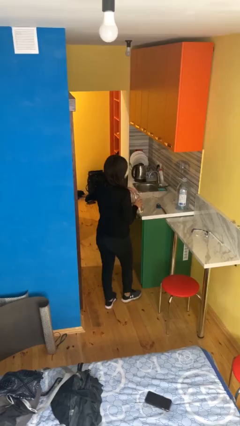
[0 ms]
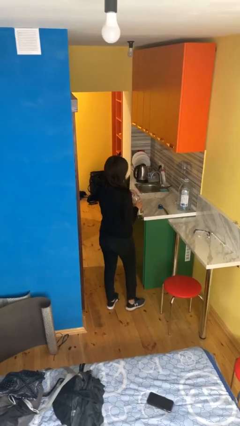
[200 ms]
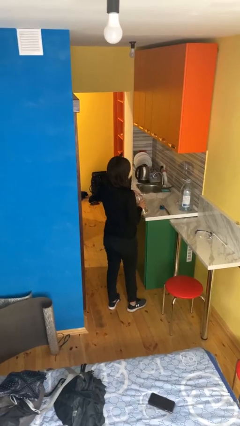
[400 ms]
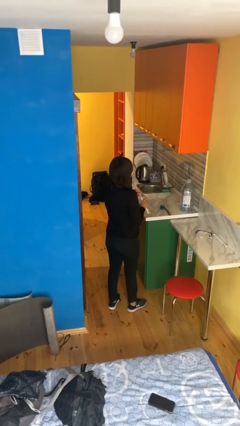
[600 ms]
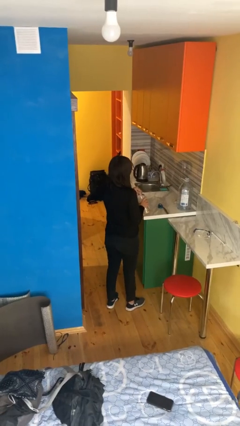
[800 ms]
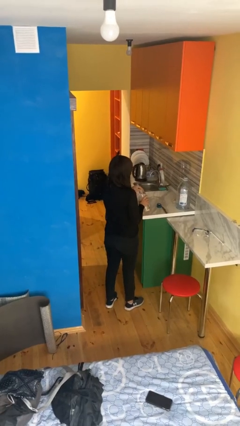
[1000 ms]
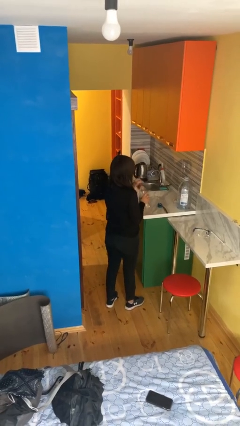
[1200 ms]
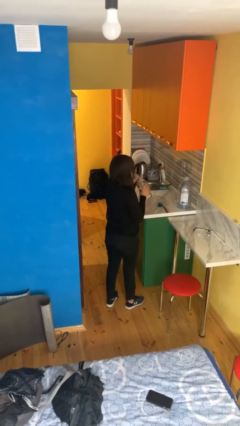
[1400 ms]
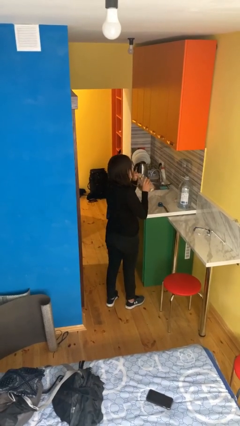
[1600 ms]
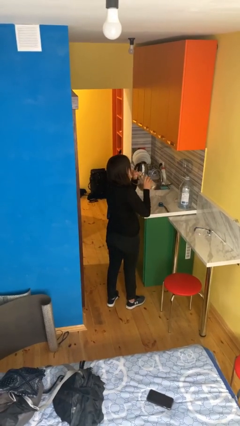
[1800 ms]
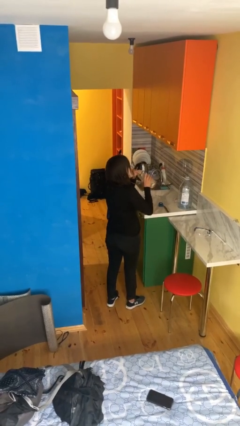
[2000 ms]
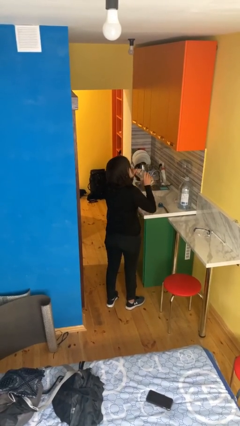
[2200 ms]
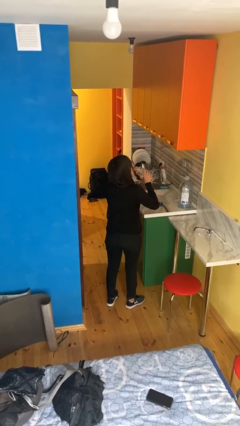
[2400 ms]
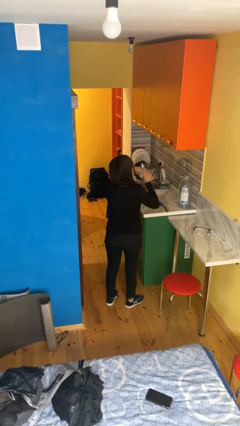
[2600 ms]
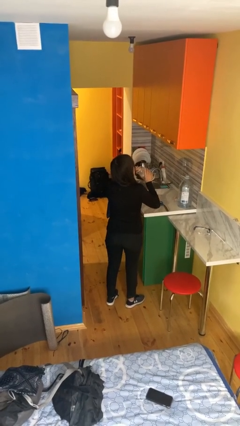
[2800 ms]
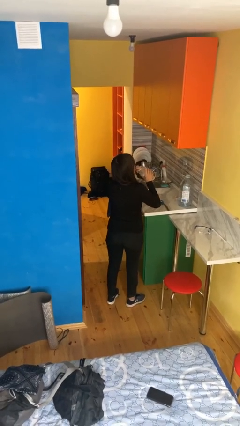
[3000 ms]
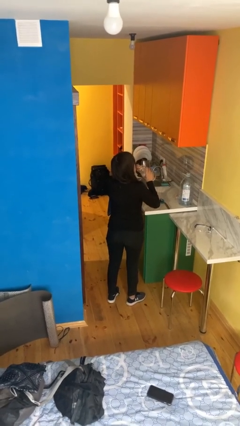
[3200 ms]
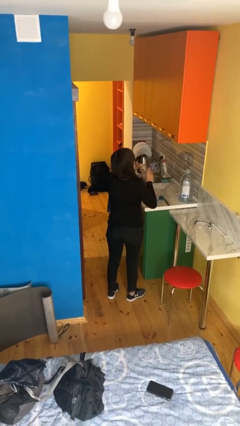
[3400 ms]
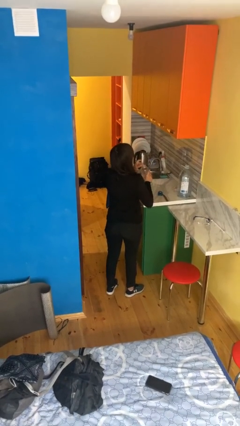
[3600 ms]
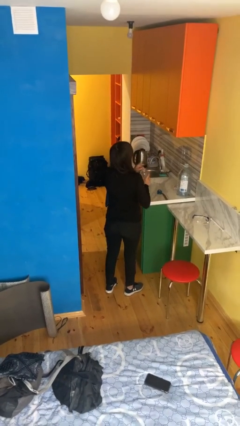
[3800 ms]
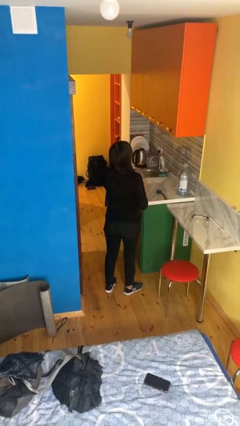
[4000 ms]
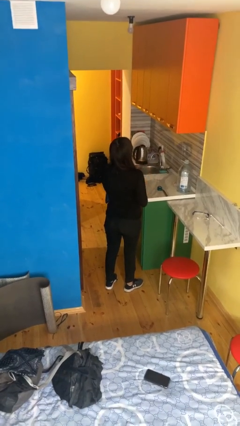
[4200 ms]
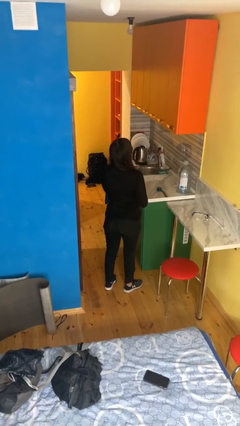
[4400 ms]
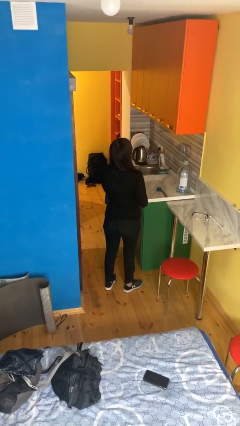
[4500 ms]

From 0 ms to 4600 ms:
person drinks from straw

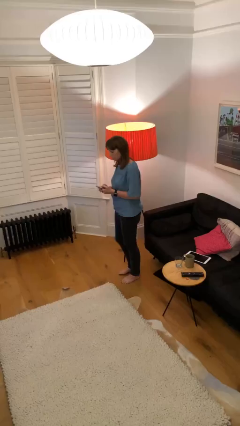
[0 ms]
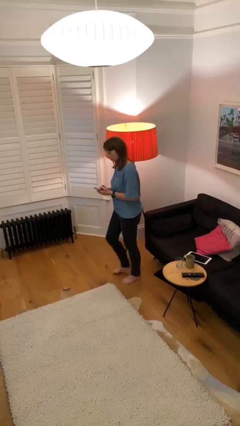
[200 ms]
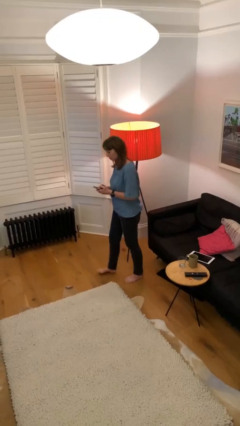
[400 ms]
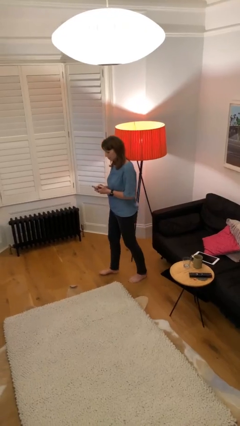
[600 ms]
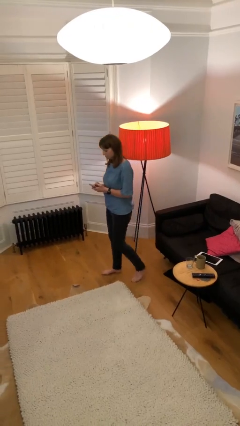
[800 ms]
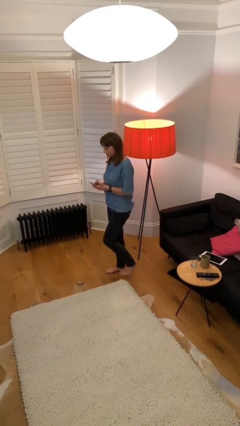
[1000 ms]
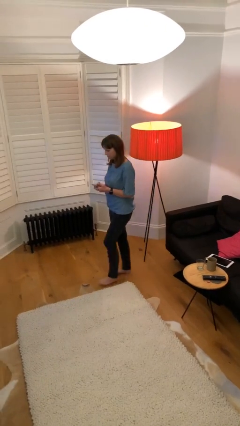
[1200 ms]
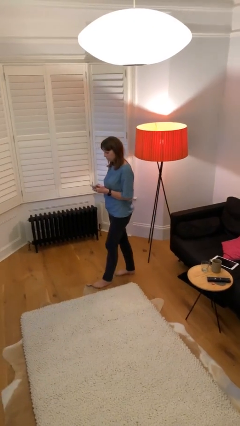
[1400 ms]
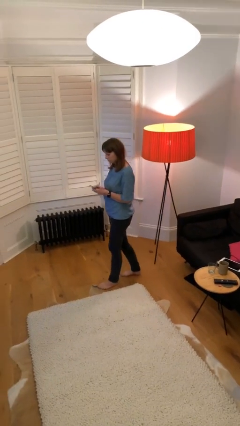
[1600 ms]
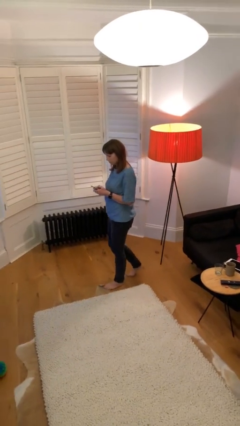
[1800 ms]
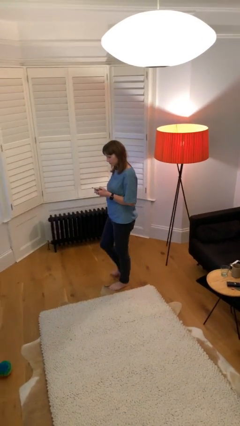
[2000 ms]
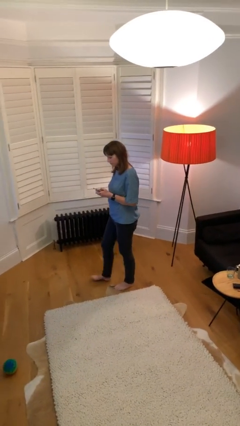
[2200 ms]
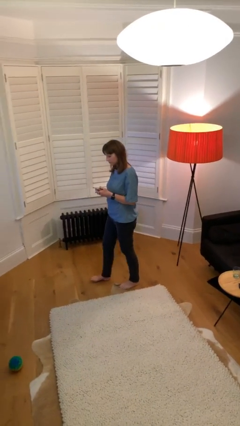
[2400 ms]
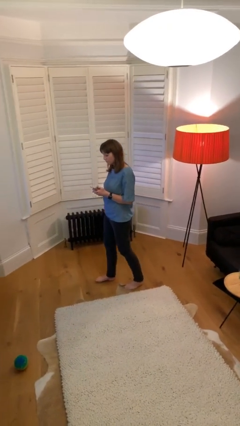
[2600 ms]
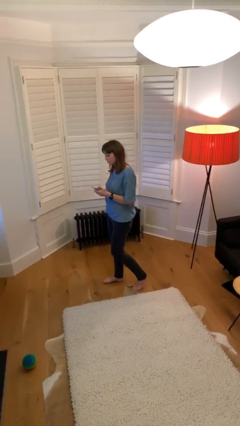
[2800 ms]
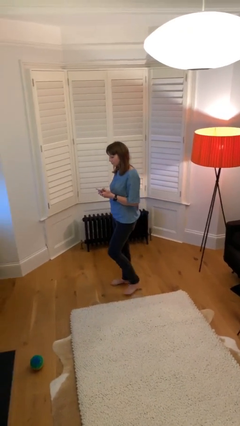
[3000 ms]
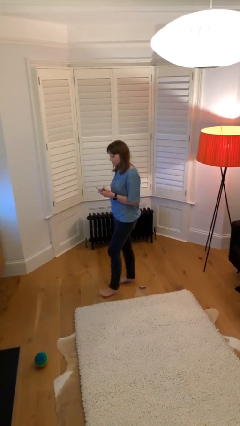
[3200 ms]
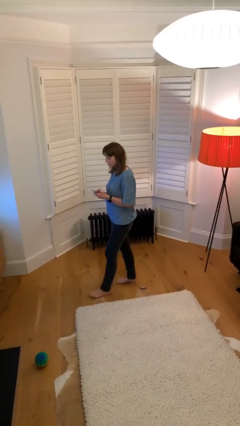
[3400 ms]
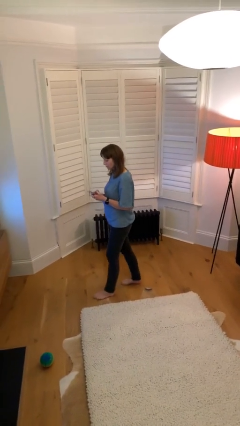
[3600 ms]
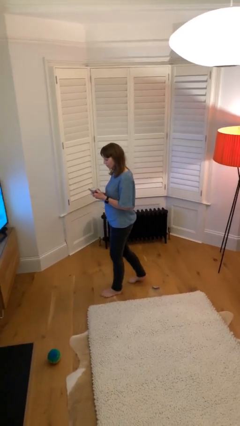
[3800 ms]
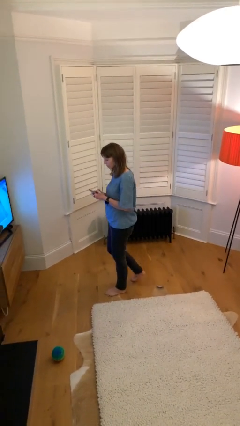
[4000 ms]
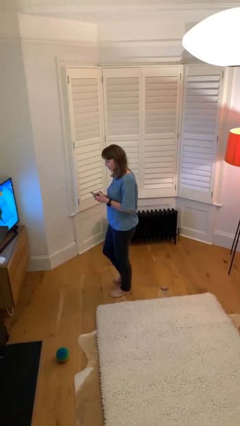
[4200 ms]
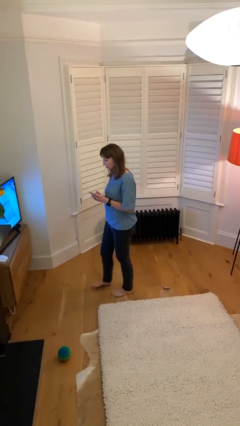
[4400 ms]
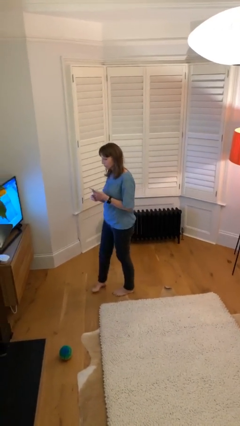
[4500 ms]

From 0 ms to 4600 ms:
person texts on phone

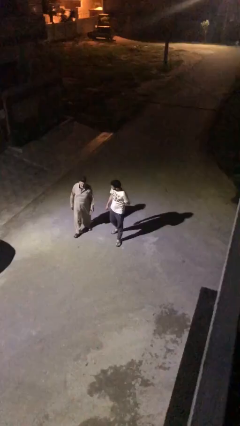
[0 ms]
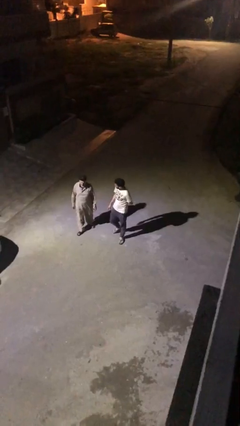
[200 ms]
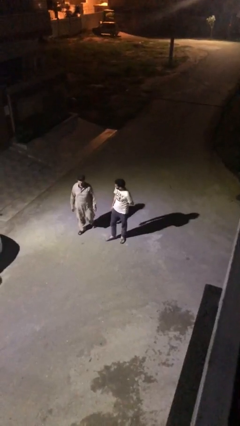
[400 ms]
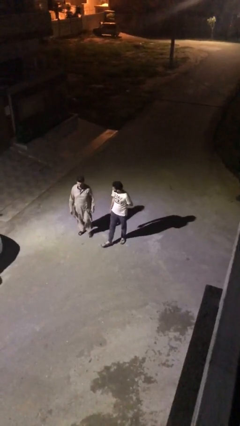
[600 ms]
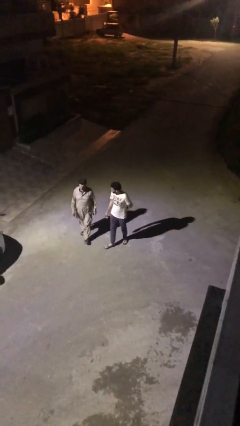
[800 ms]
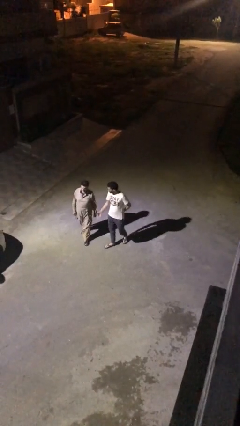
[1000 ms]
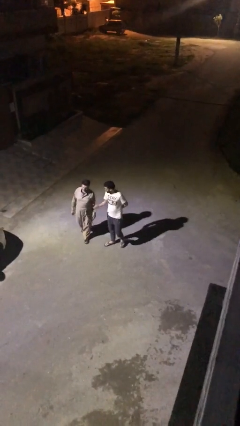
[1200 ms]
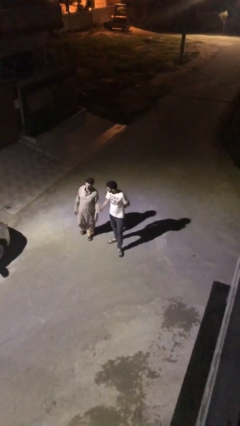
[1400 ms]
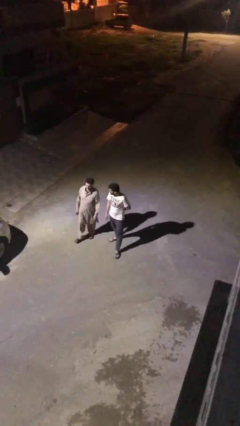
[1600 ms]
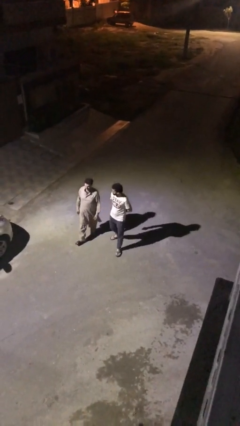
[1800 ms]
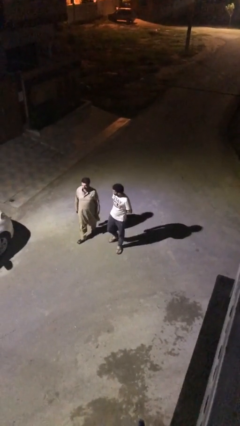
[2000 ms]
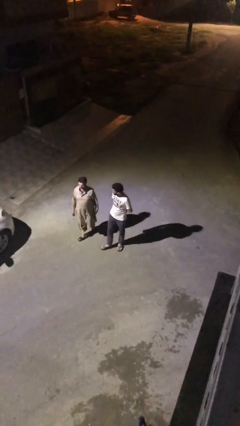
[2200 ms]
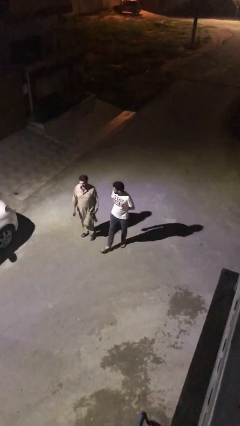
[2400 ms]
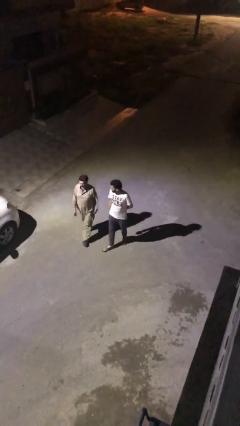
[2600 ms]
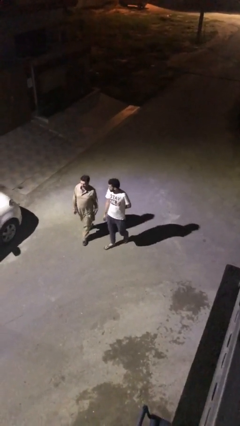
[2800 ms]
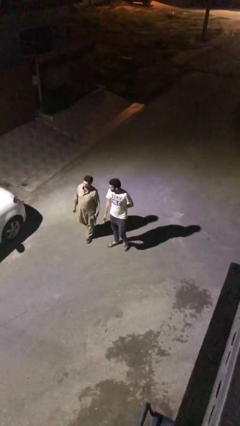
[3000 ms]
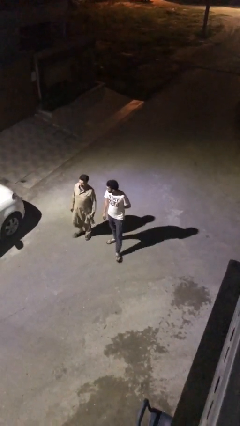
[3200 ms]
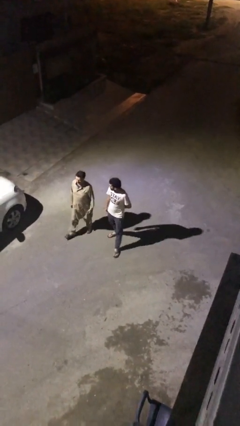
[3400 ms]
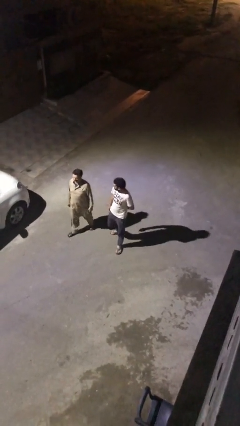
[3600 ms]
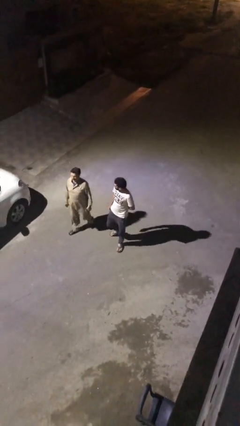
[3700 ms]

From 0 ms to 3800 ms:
person talks to person

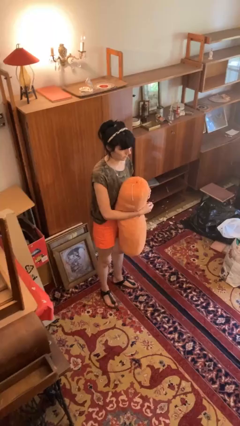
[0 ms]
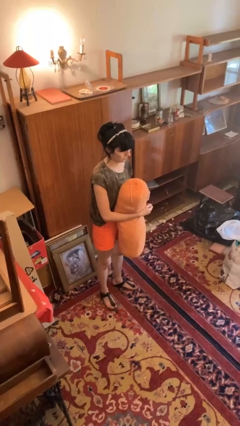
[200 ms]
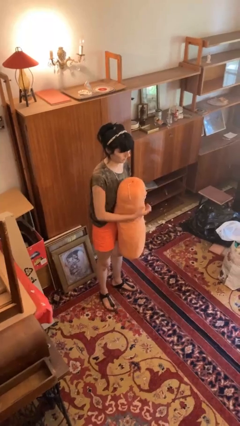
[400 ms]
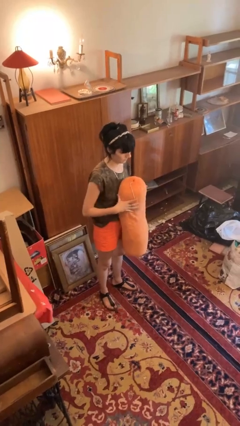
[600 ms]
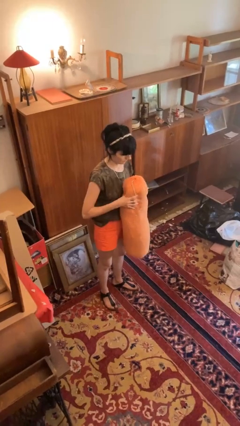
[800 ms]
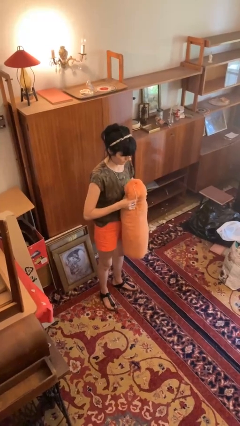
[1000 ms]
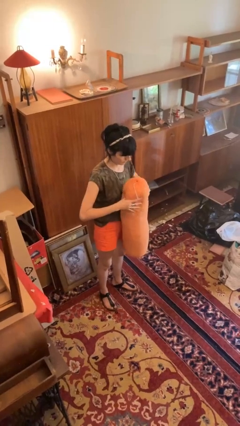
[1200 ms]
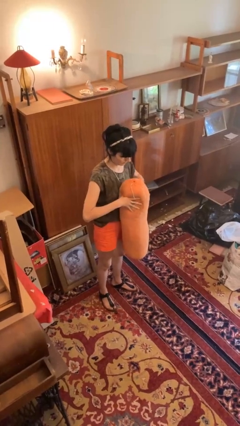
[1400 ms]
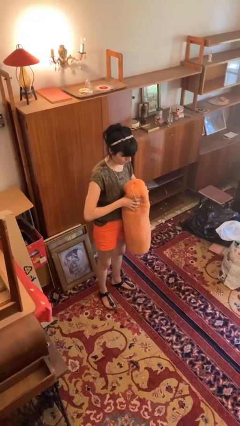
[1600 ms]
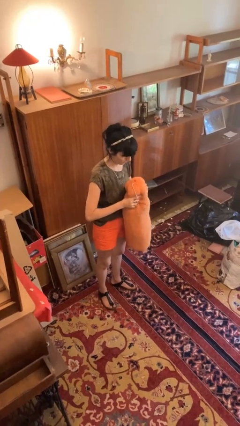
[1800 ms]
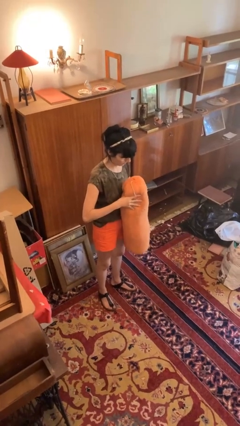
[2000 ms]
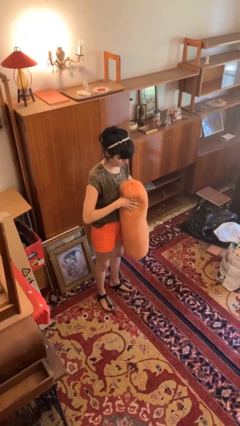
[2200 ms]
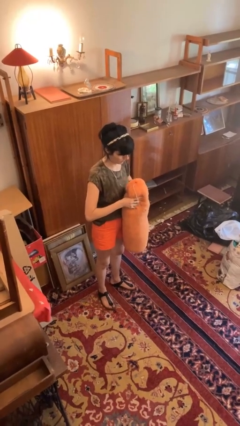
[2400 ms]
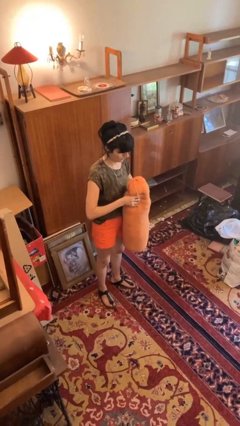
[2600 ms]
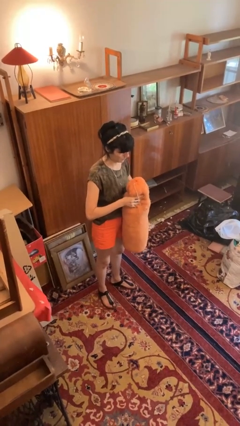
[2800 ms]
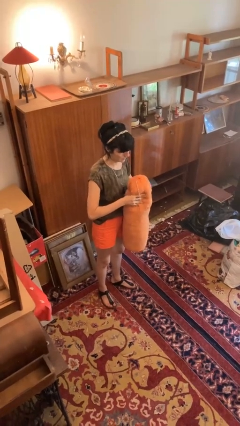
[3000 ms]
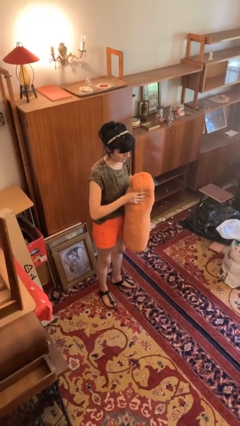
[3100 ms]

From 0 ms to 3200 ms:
person squeezes object

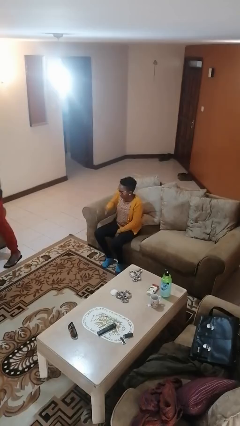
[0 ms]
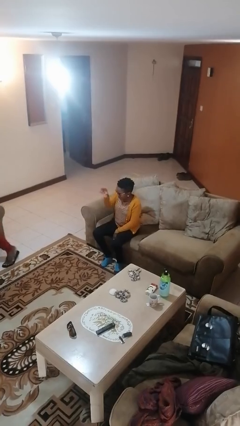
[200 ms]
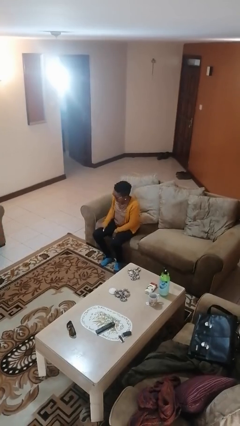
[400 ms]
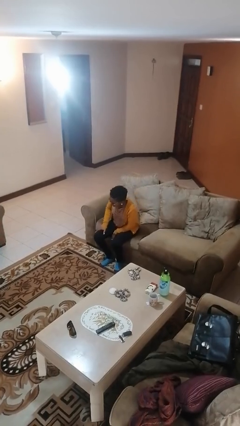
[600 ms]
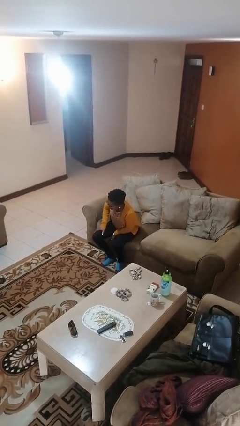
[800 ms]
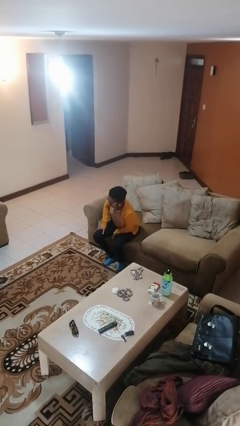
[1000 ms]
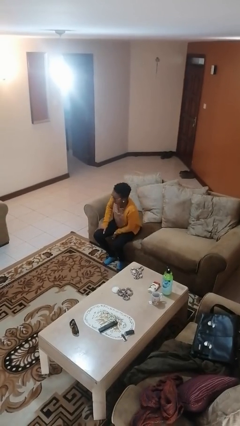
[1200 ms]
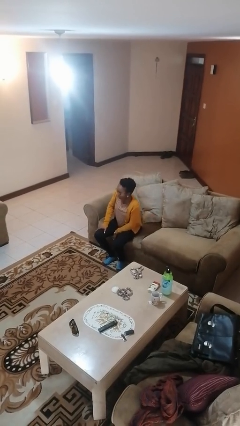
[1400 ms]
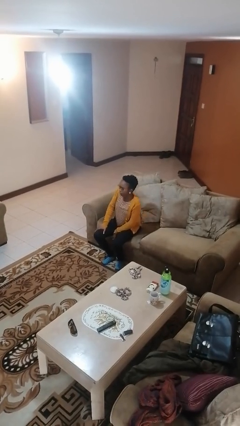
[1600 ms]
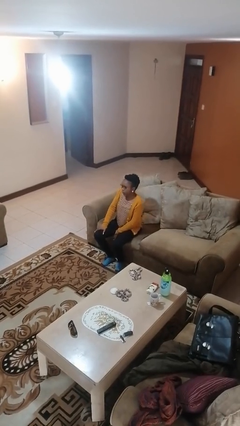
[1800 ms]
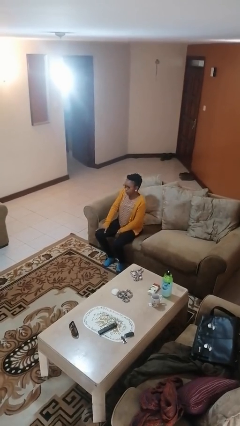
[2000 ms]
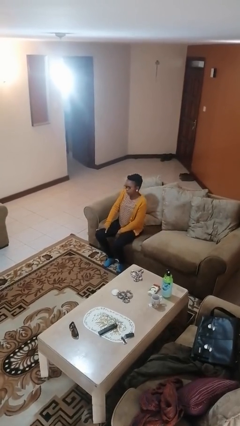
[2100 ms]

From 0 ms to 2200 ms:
person slaps hands on thighs
